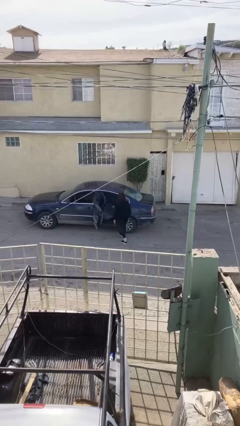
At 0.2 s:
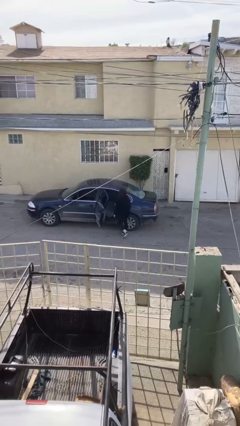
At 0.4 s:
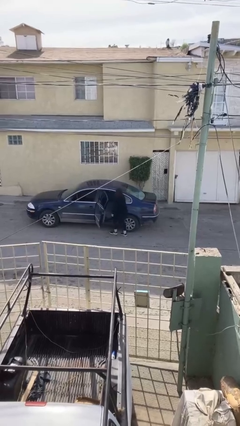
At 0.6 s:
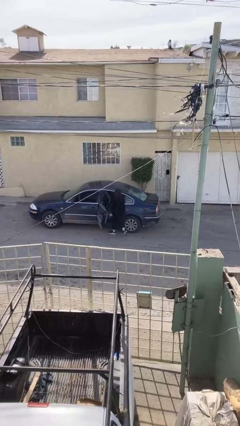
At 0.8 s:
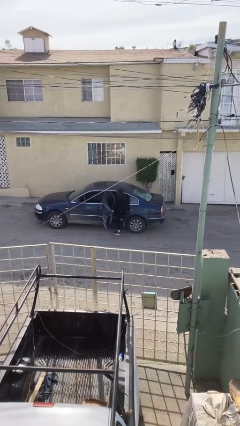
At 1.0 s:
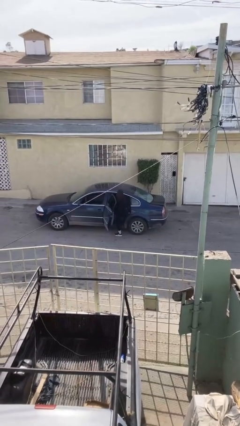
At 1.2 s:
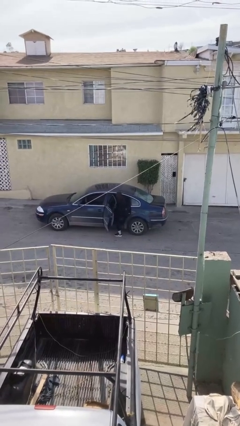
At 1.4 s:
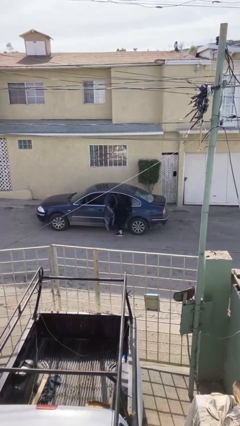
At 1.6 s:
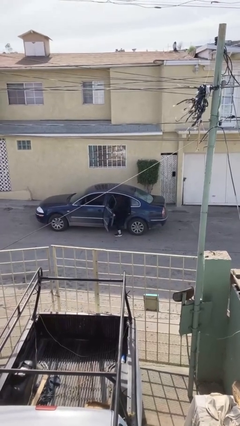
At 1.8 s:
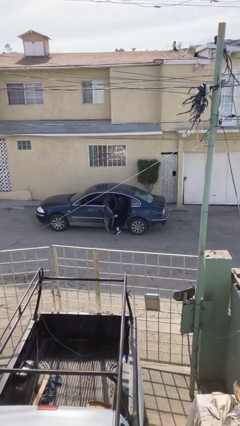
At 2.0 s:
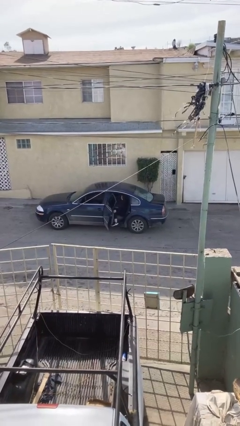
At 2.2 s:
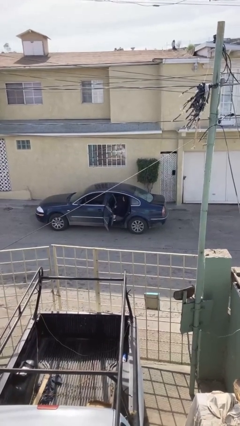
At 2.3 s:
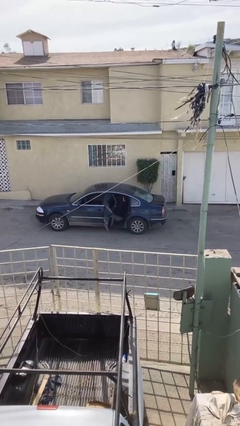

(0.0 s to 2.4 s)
person enters car

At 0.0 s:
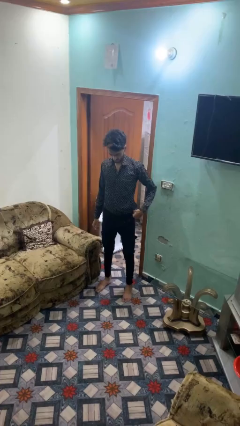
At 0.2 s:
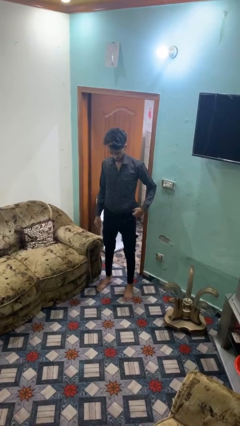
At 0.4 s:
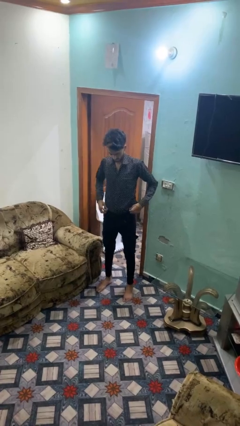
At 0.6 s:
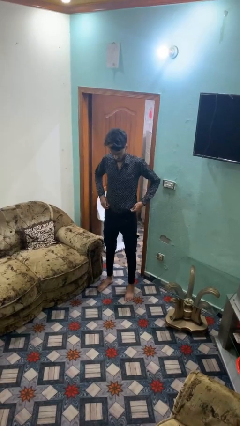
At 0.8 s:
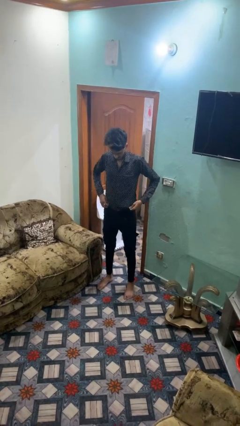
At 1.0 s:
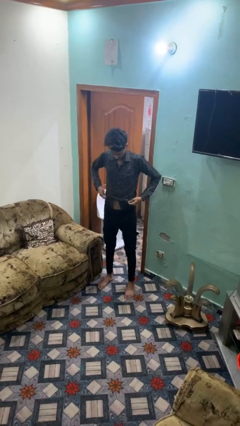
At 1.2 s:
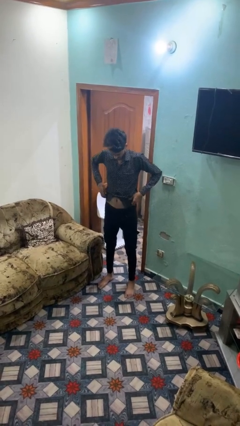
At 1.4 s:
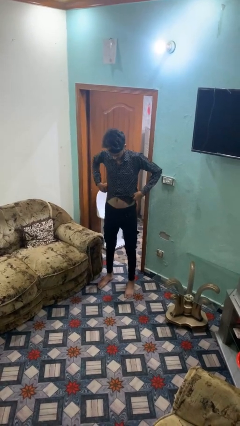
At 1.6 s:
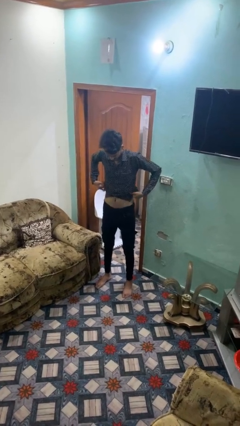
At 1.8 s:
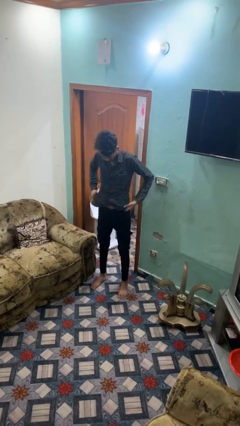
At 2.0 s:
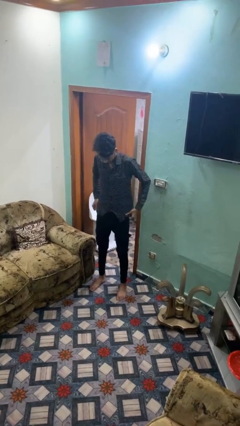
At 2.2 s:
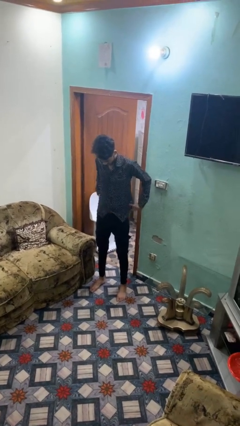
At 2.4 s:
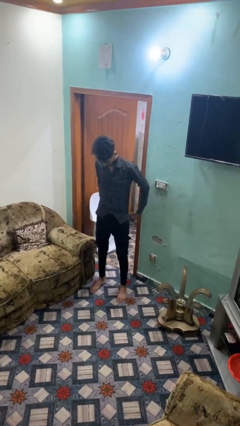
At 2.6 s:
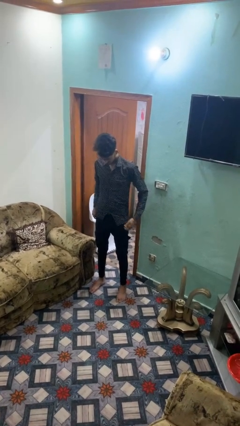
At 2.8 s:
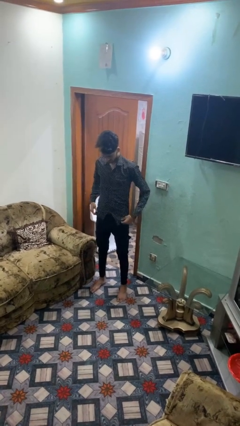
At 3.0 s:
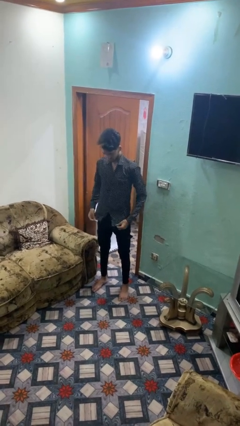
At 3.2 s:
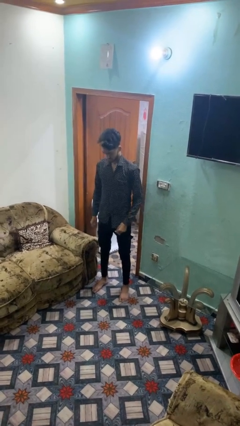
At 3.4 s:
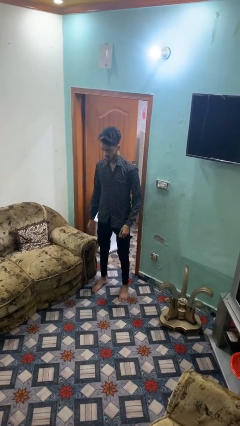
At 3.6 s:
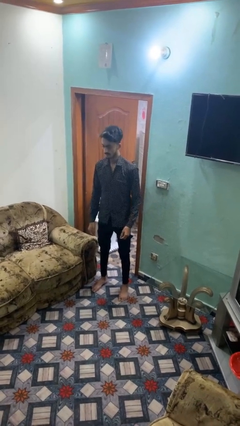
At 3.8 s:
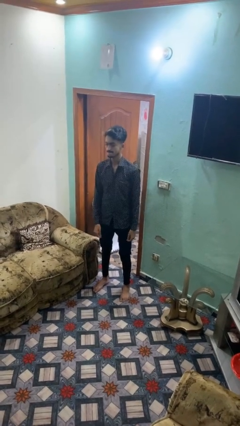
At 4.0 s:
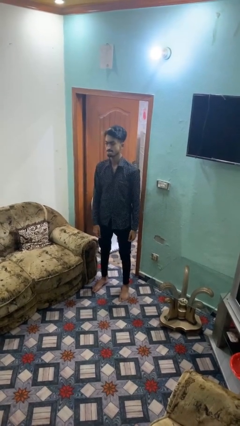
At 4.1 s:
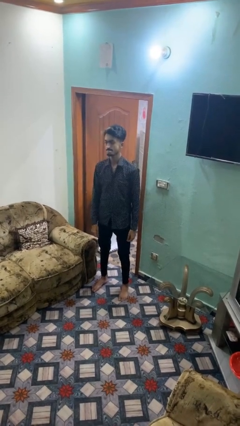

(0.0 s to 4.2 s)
person untucks shirt

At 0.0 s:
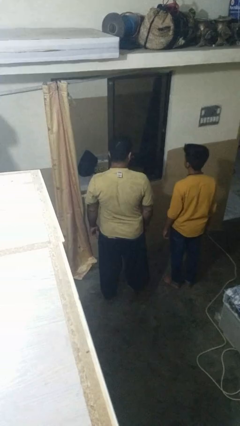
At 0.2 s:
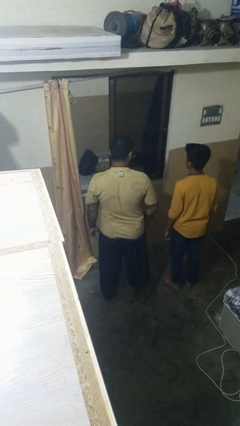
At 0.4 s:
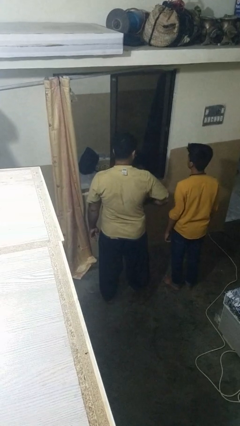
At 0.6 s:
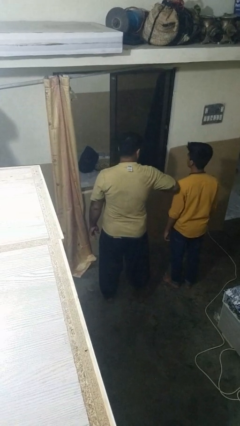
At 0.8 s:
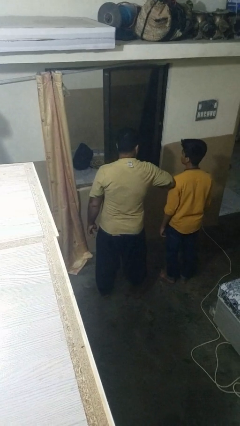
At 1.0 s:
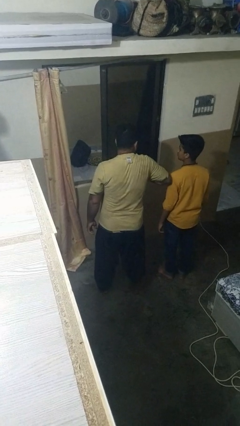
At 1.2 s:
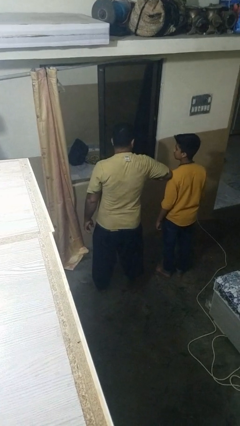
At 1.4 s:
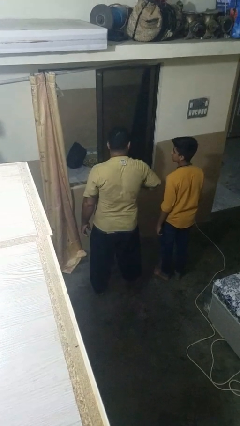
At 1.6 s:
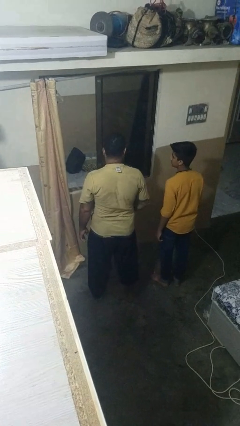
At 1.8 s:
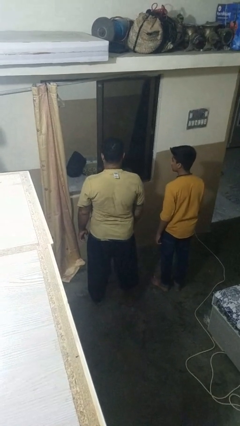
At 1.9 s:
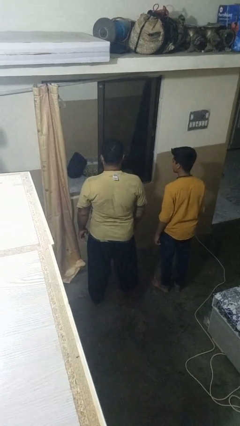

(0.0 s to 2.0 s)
person nudges person with elbow

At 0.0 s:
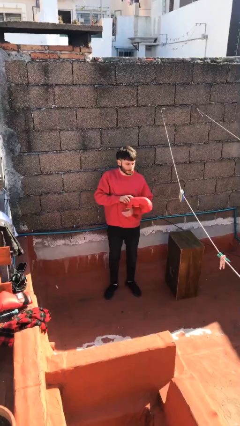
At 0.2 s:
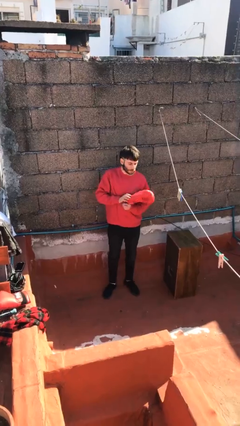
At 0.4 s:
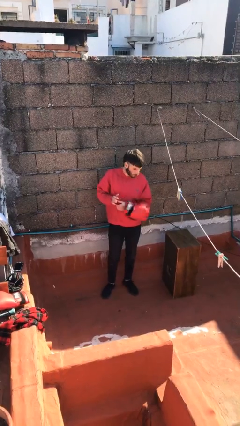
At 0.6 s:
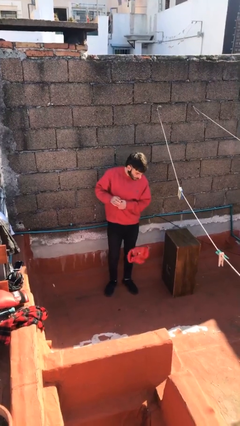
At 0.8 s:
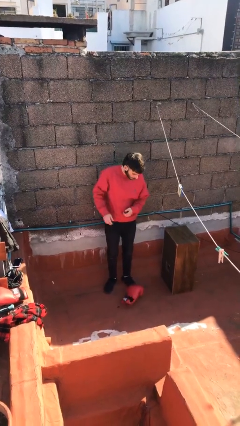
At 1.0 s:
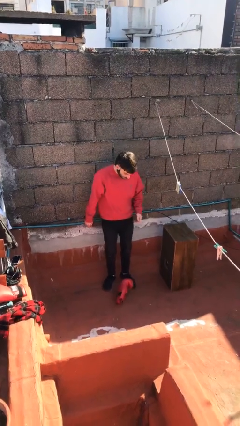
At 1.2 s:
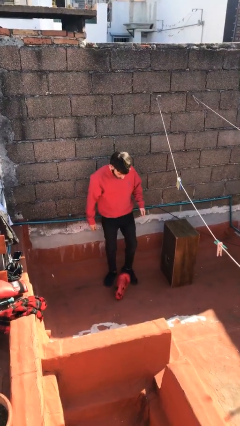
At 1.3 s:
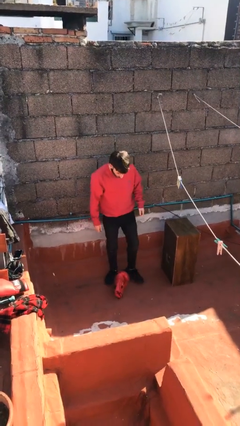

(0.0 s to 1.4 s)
person drops object

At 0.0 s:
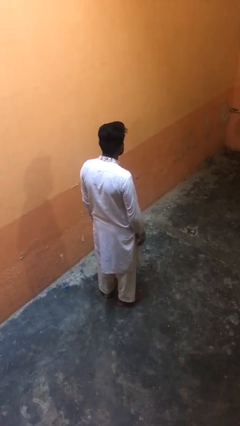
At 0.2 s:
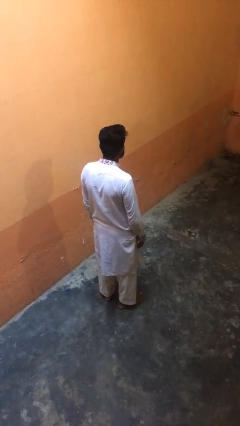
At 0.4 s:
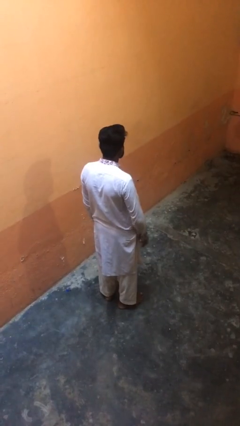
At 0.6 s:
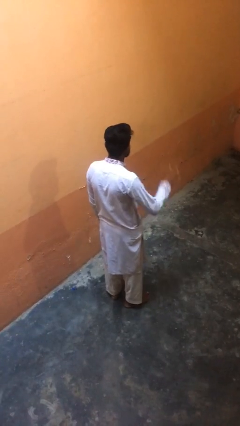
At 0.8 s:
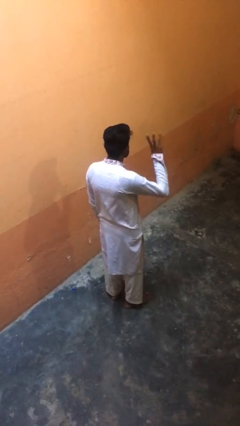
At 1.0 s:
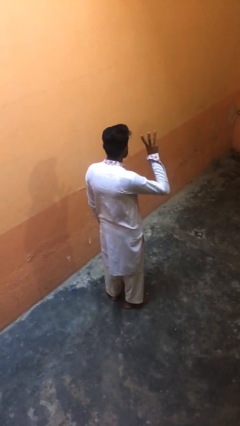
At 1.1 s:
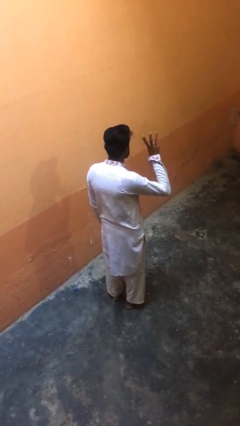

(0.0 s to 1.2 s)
person gestures number three

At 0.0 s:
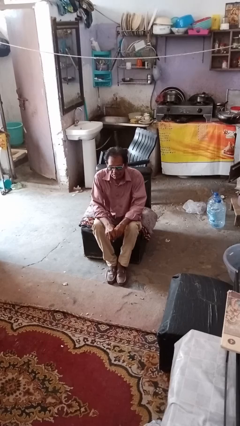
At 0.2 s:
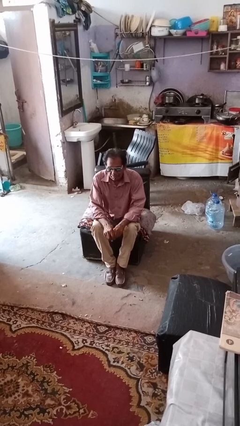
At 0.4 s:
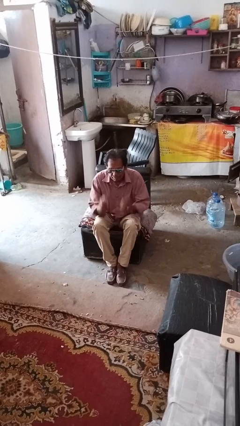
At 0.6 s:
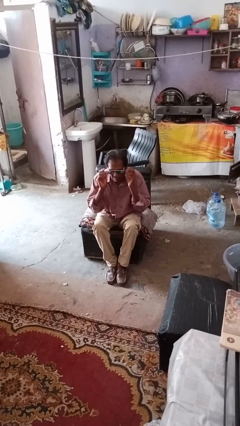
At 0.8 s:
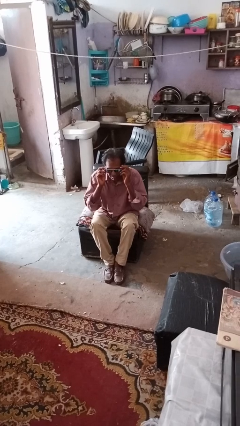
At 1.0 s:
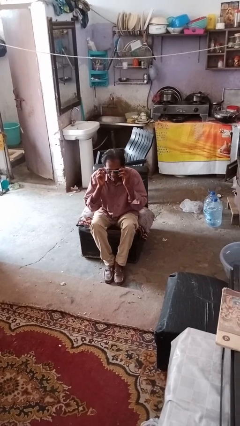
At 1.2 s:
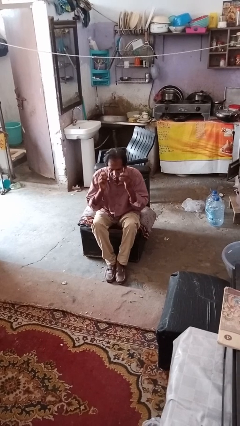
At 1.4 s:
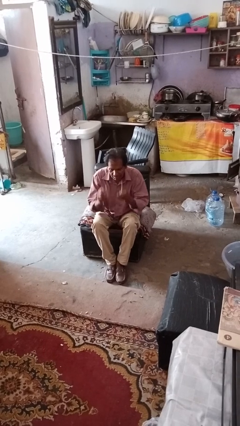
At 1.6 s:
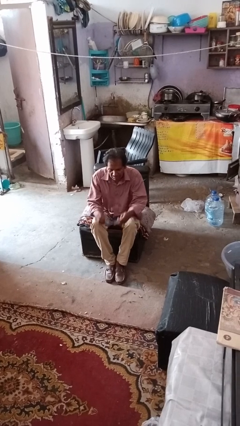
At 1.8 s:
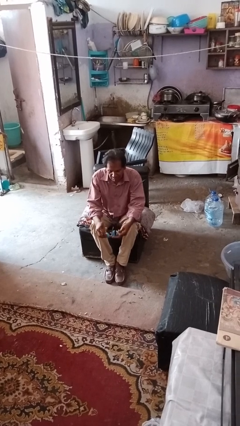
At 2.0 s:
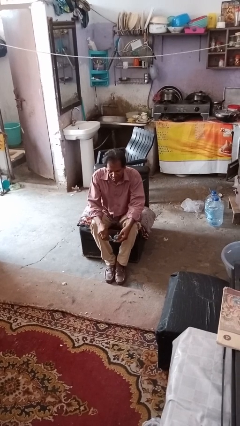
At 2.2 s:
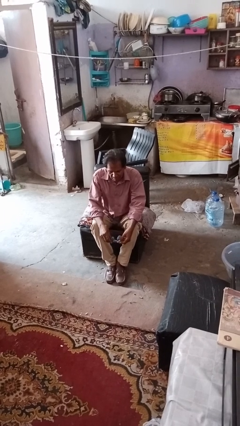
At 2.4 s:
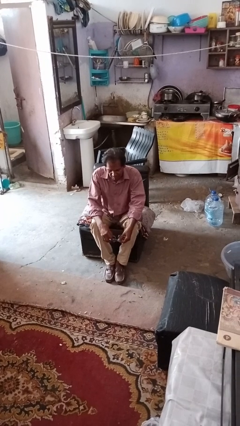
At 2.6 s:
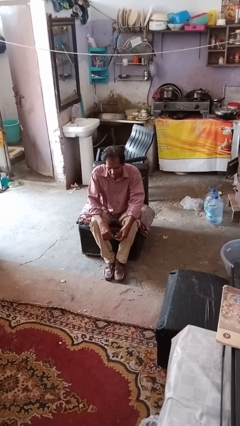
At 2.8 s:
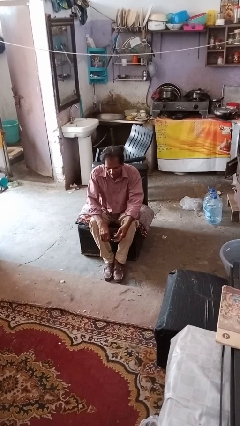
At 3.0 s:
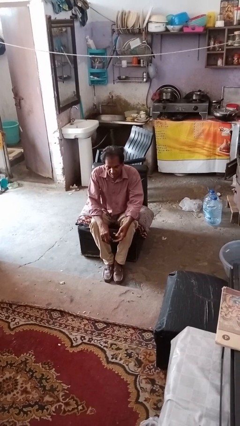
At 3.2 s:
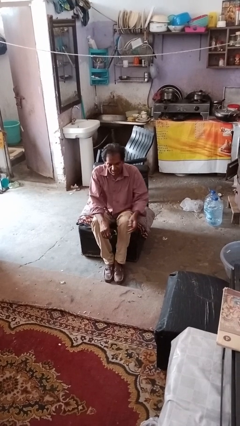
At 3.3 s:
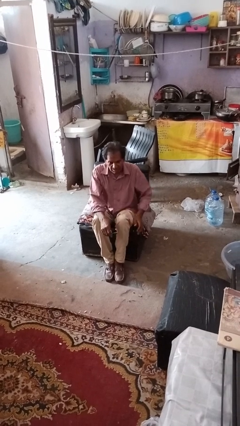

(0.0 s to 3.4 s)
person takes off sunglasses

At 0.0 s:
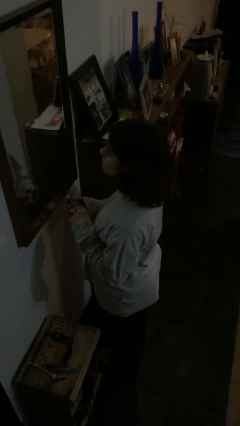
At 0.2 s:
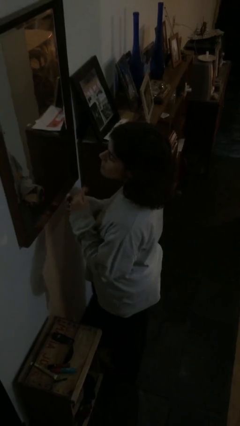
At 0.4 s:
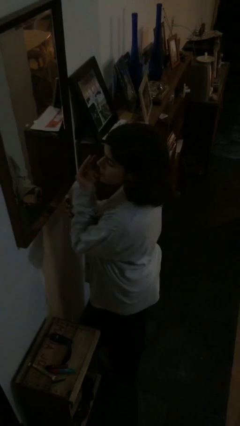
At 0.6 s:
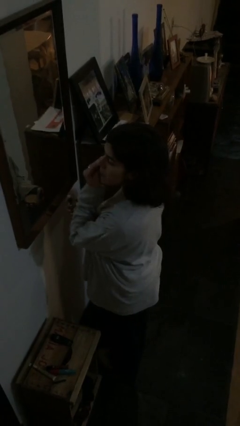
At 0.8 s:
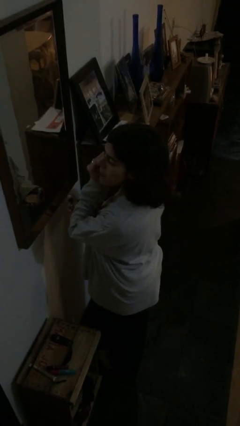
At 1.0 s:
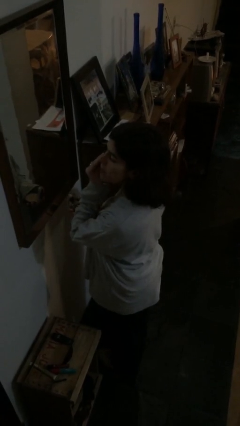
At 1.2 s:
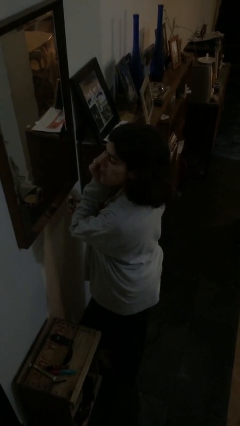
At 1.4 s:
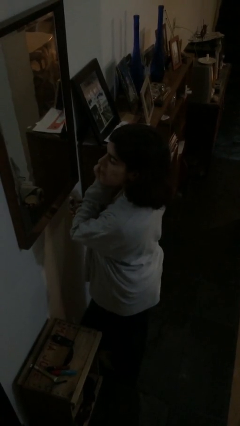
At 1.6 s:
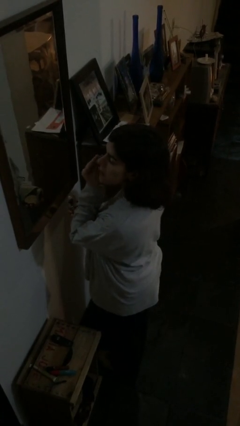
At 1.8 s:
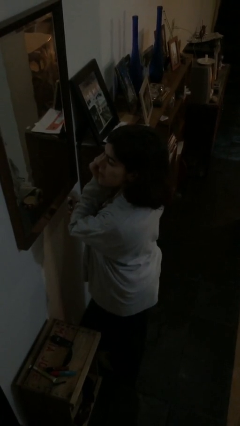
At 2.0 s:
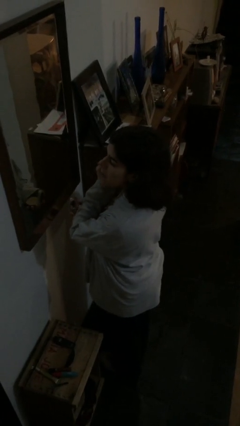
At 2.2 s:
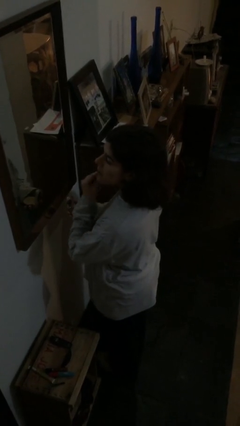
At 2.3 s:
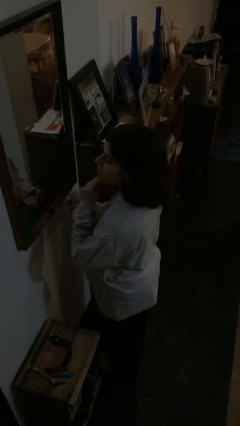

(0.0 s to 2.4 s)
person applies foundation makeup
